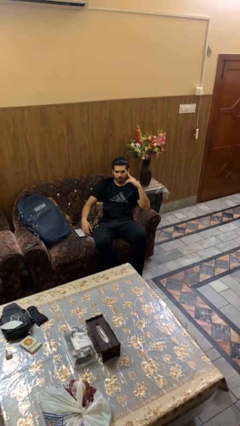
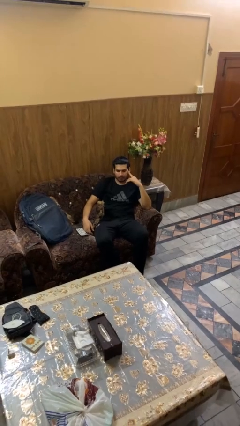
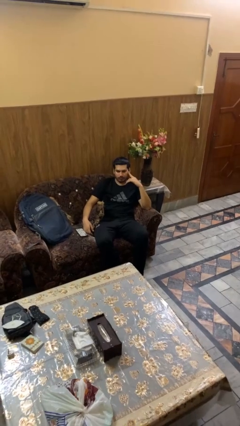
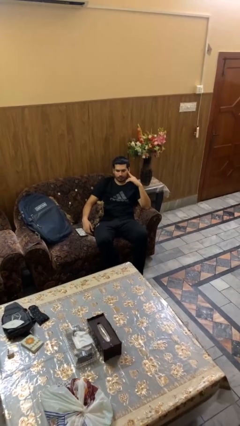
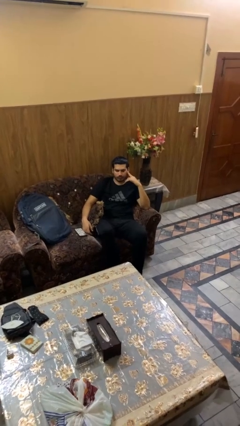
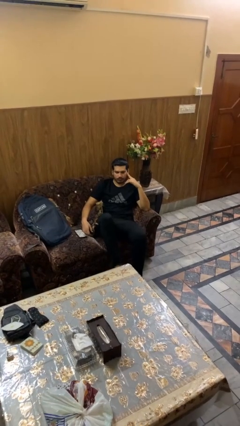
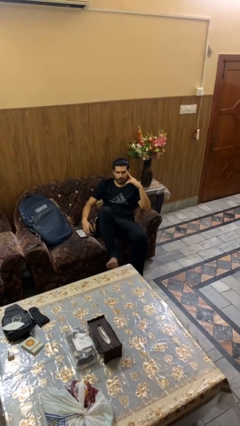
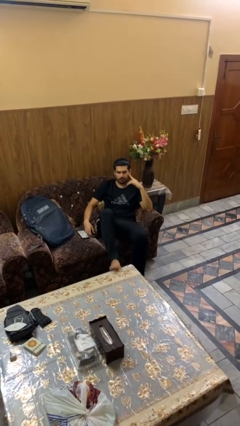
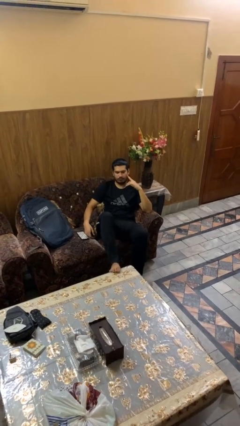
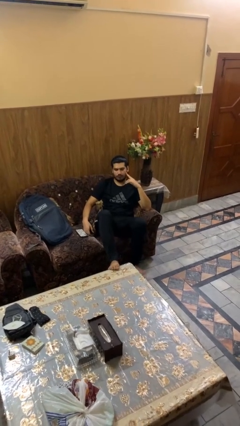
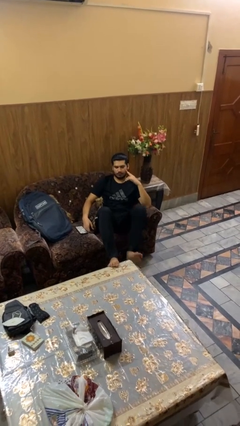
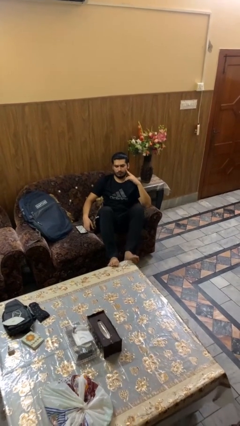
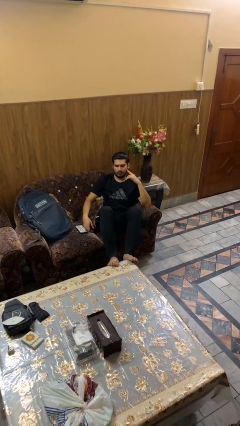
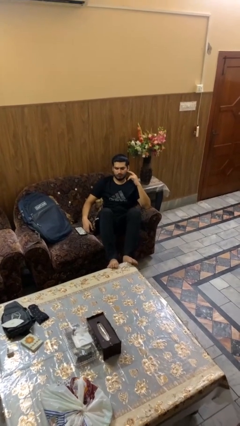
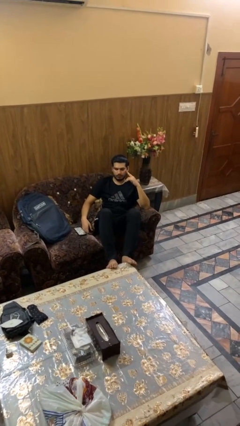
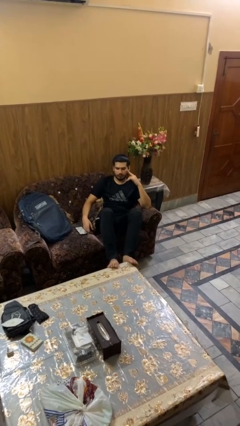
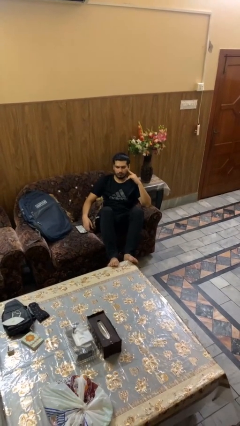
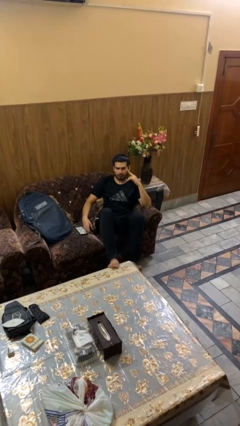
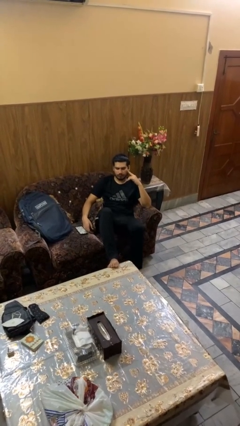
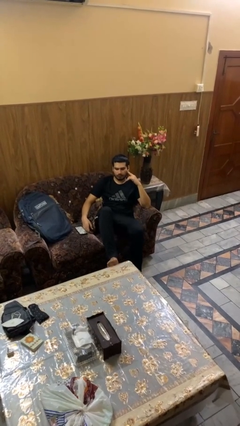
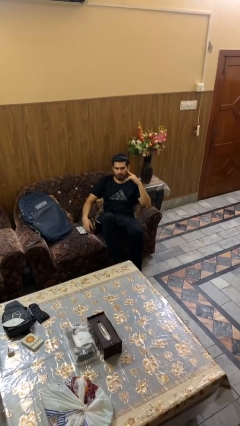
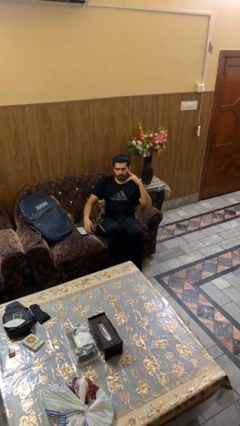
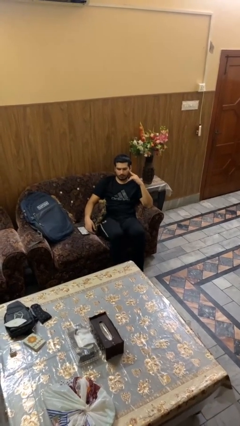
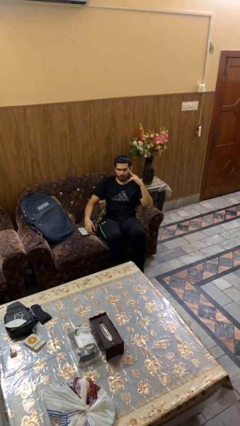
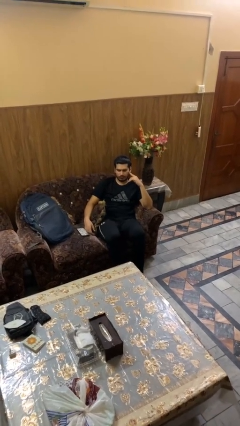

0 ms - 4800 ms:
person puts feet up

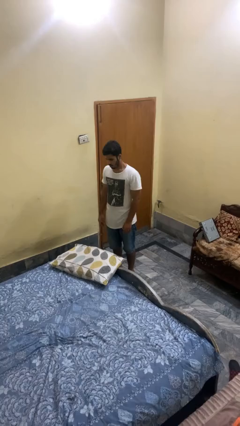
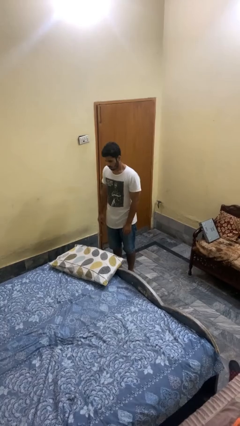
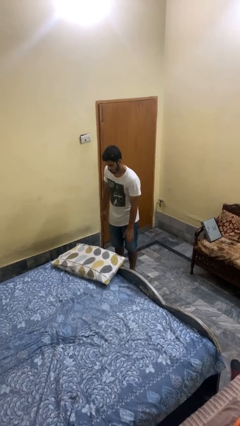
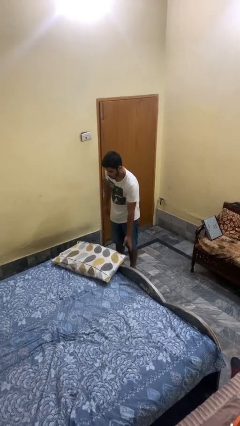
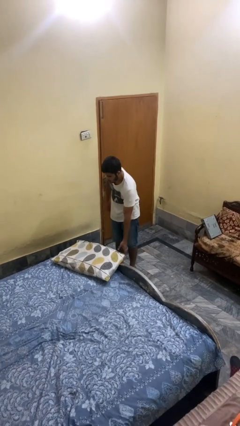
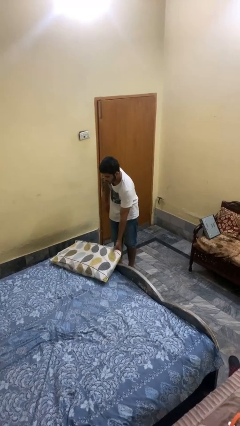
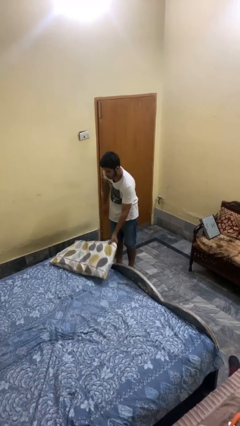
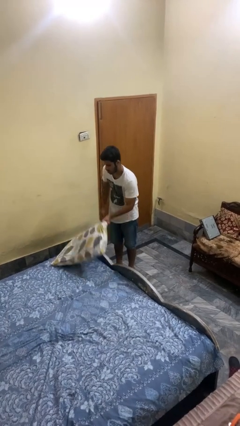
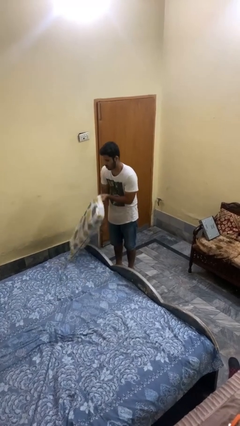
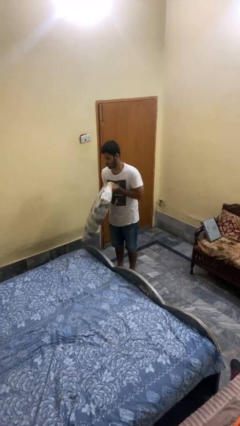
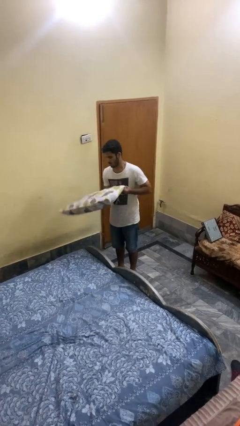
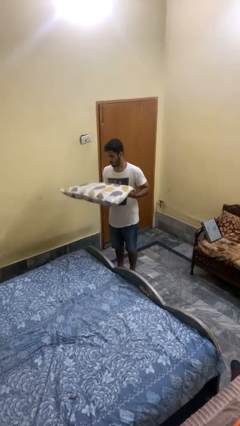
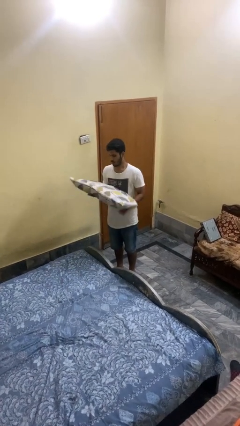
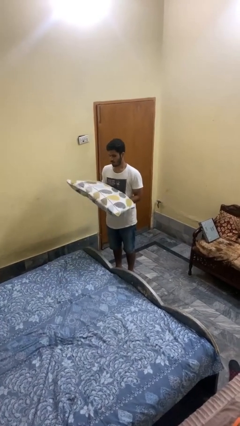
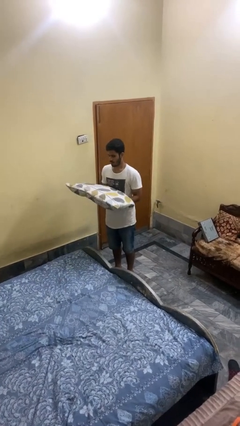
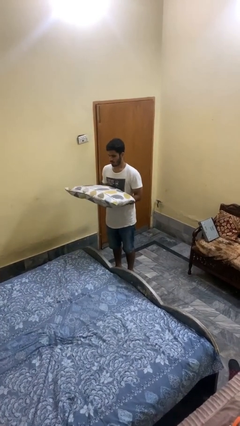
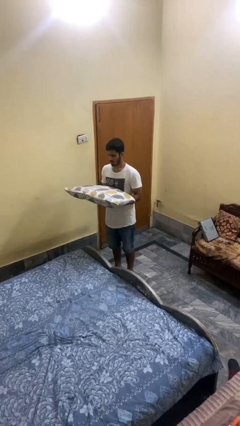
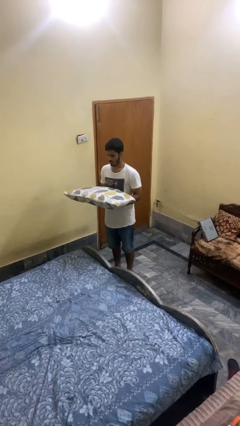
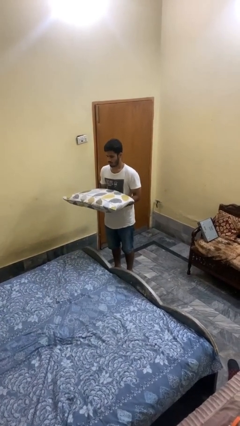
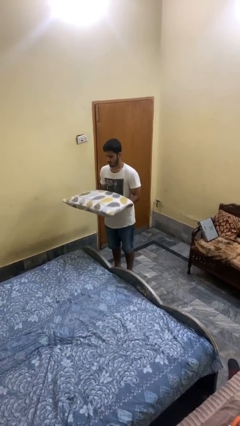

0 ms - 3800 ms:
person picks up object from bed

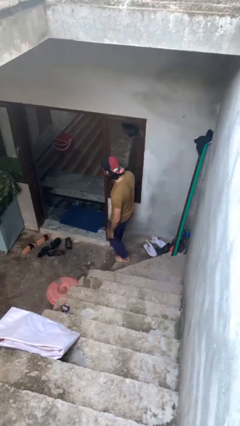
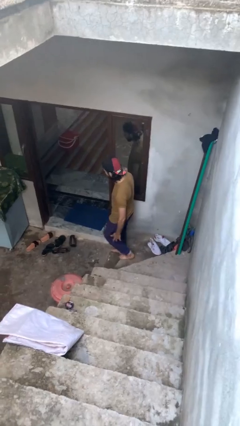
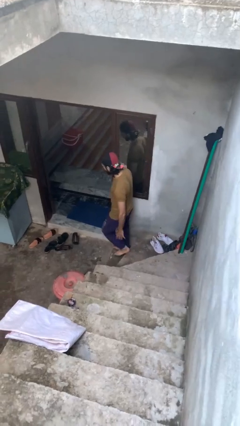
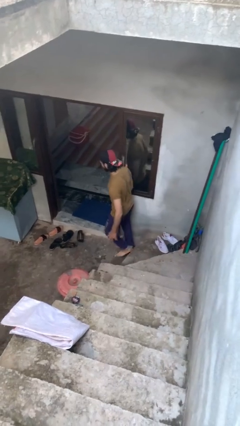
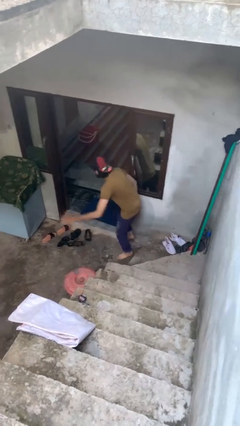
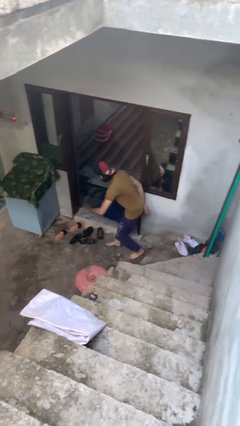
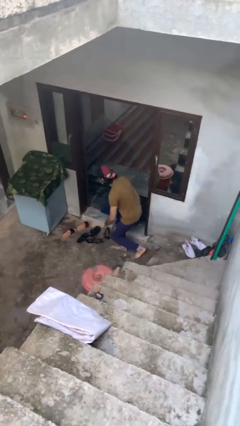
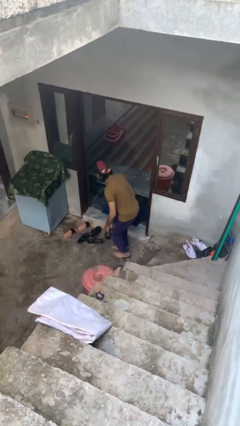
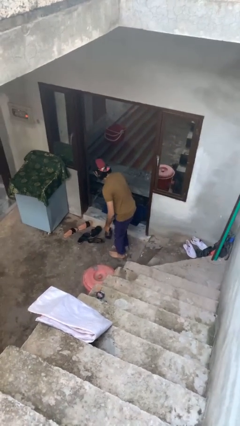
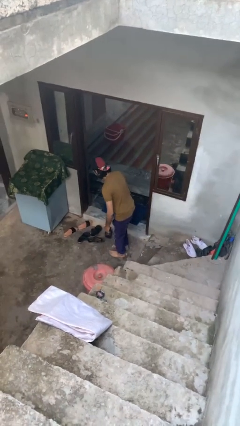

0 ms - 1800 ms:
person trips on stair

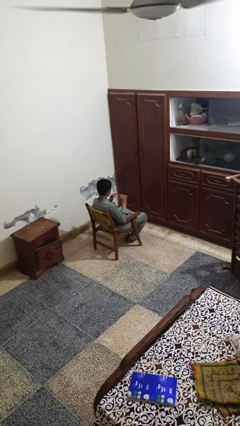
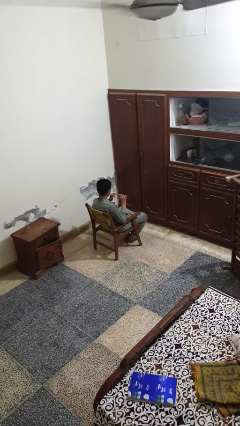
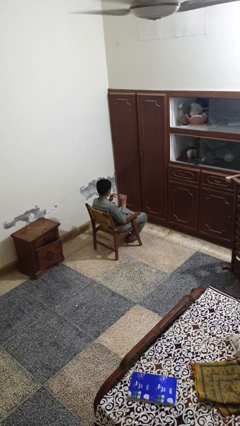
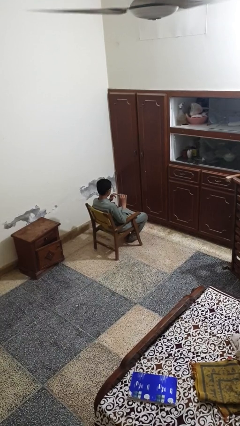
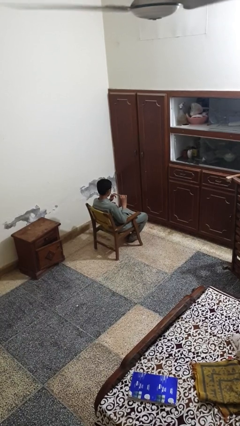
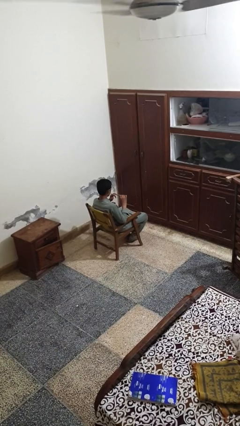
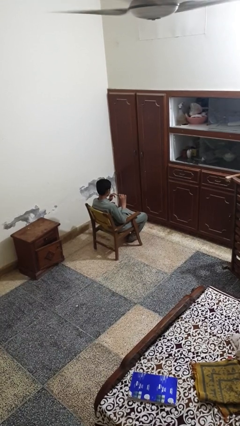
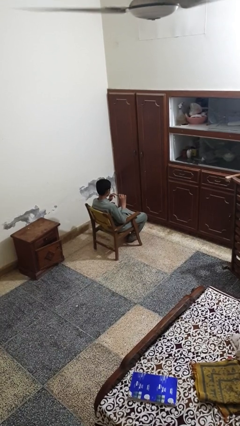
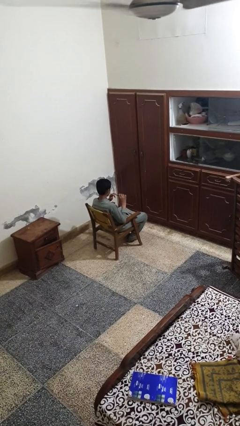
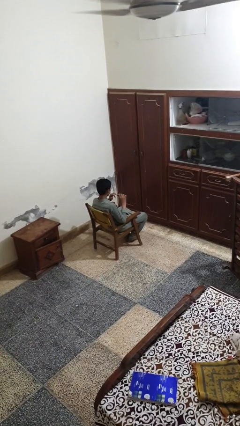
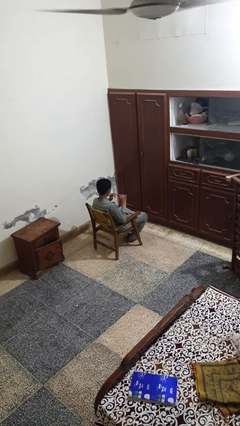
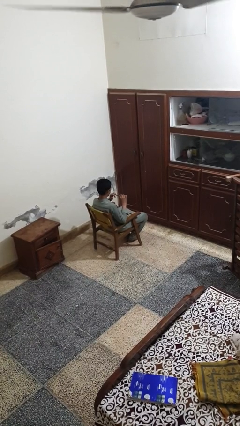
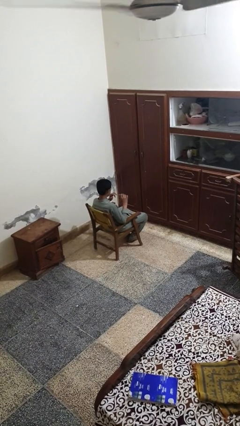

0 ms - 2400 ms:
person clips fingernails

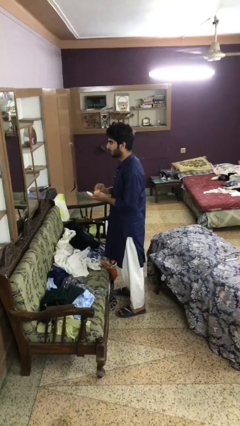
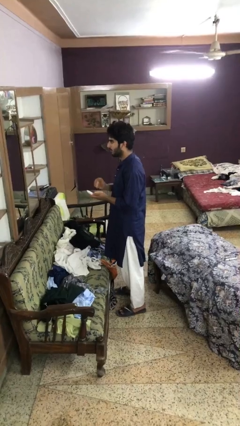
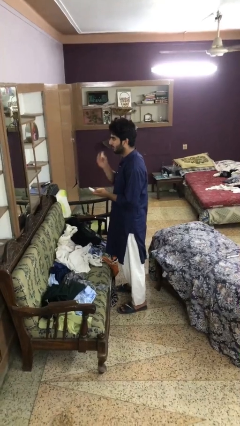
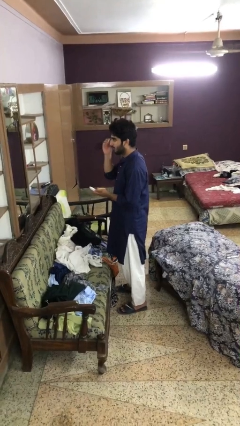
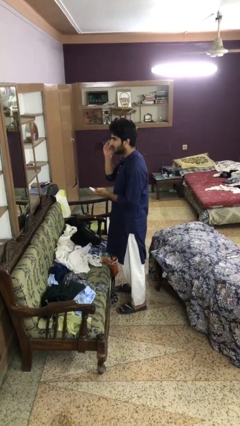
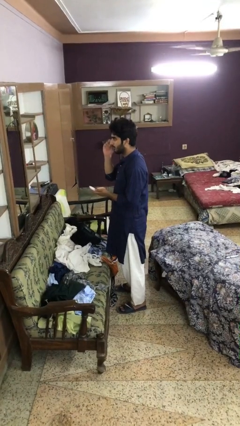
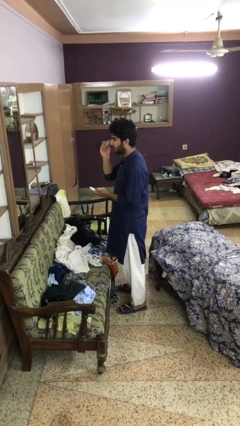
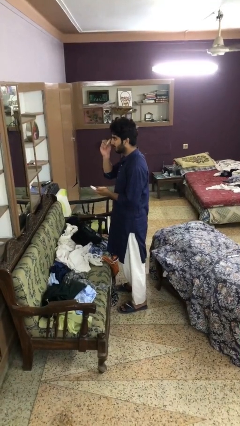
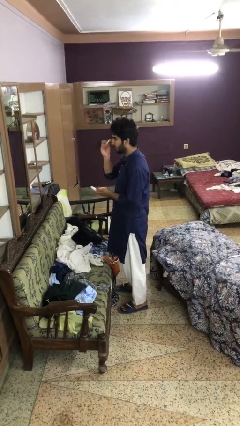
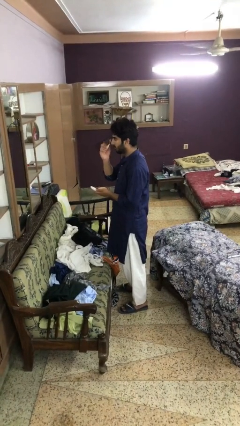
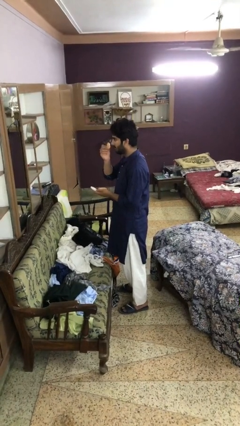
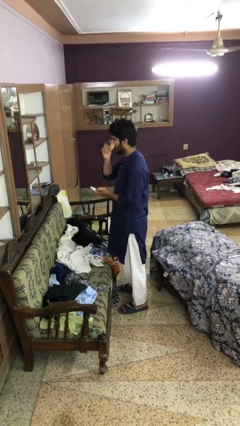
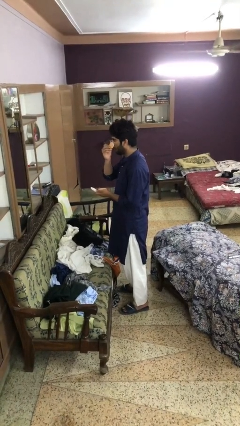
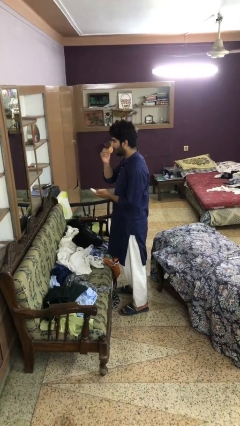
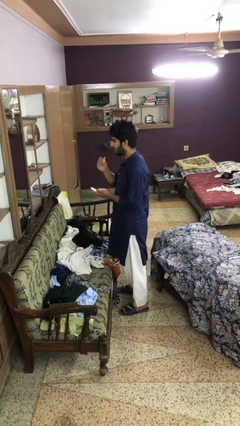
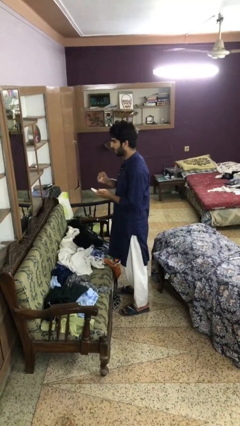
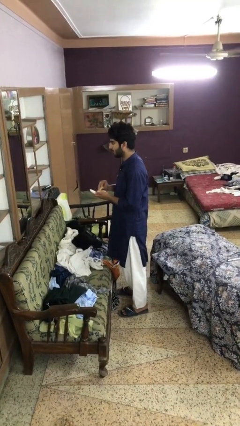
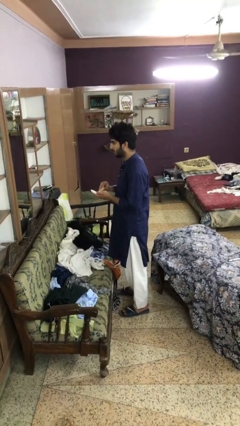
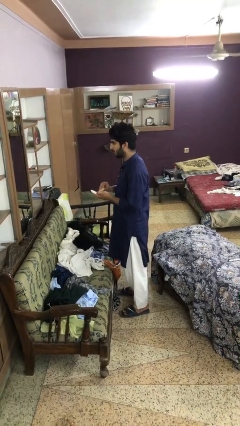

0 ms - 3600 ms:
person applies foundation makeup

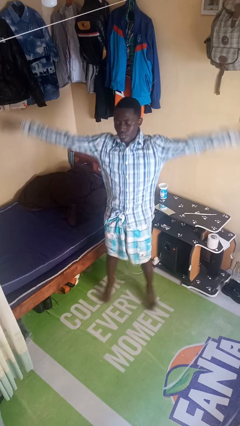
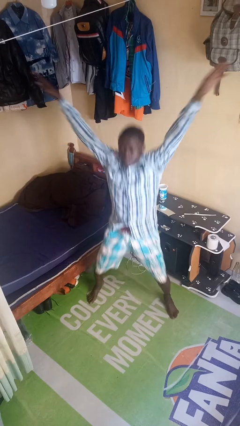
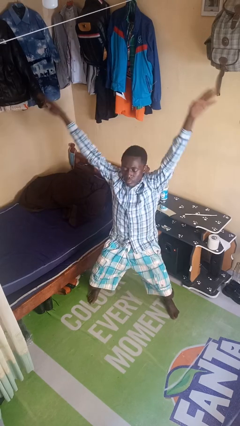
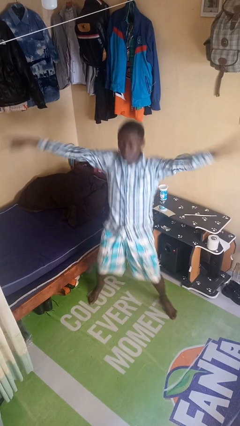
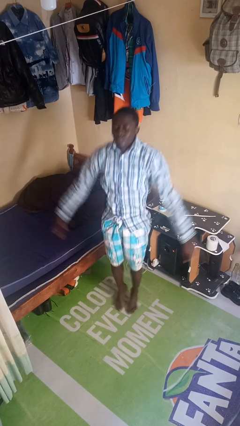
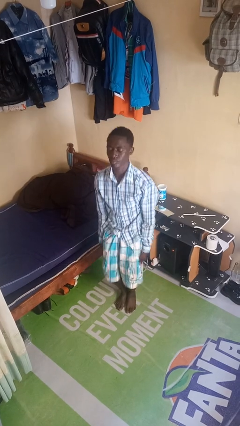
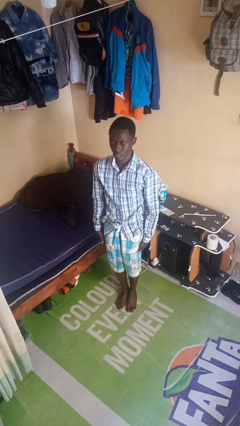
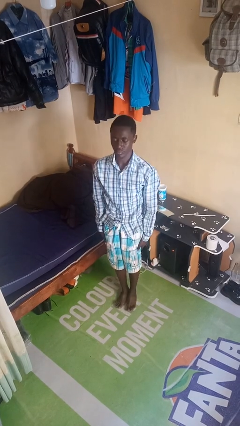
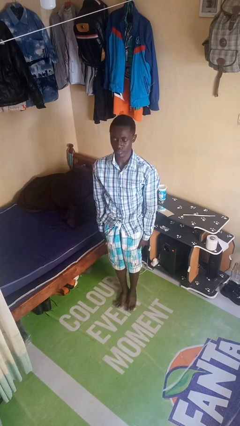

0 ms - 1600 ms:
person exercises with jumping jacks
